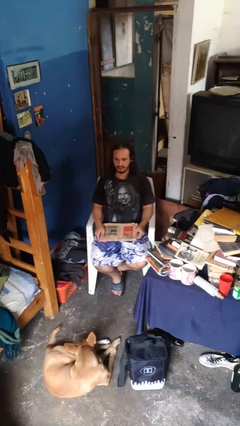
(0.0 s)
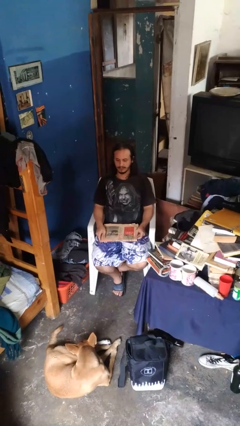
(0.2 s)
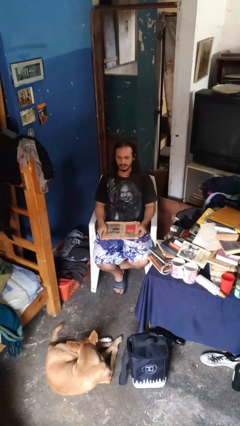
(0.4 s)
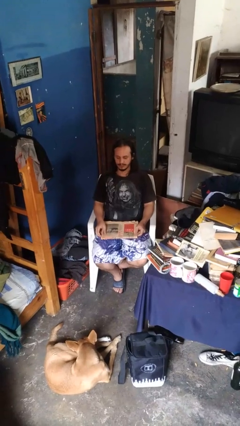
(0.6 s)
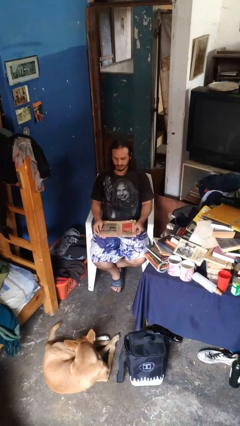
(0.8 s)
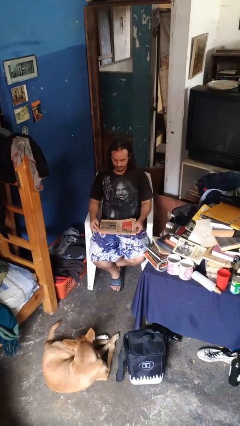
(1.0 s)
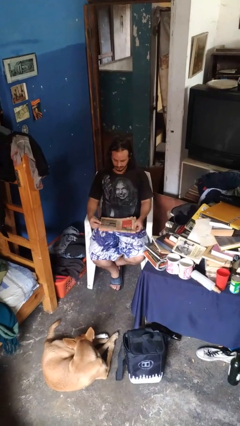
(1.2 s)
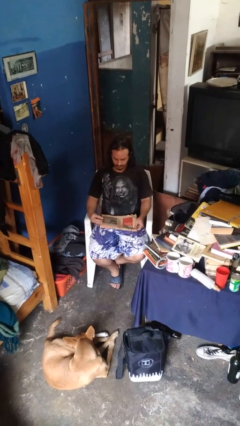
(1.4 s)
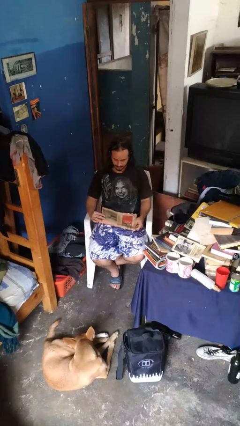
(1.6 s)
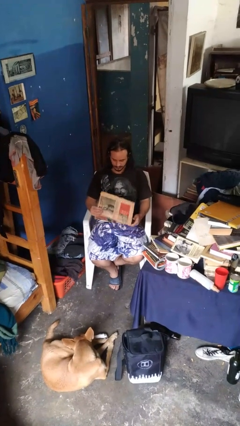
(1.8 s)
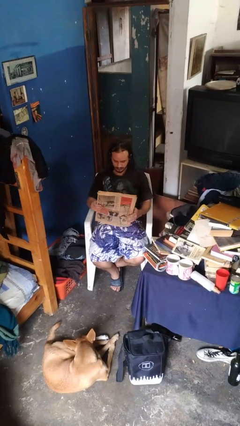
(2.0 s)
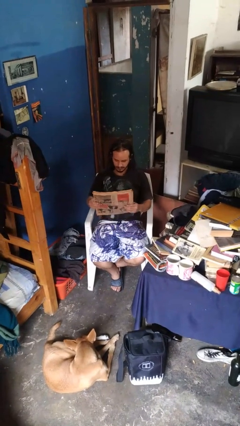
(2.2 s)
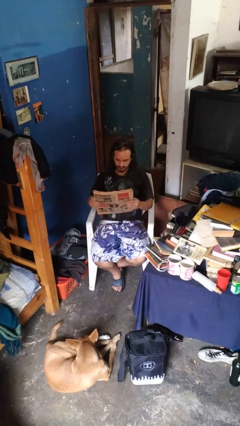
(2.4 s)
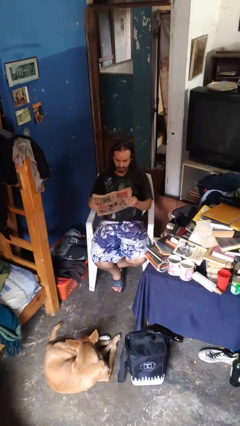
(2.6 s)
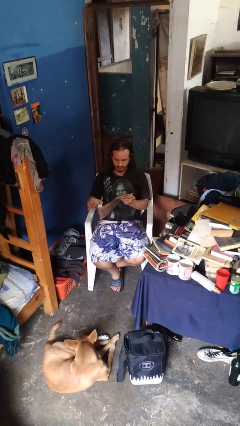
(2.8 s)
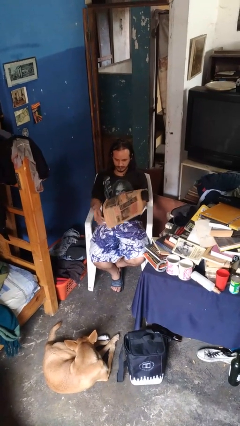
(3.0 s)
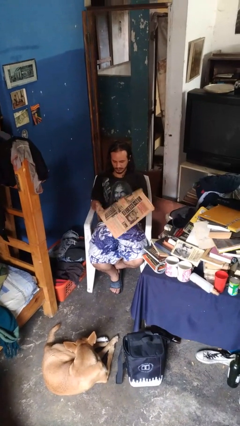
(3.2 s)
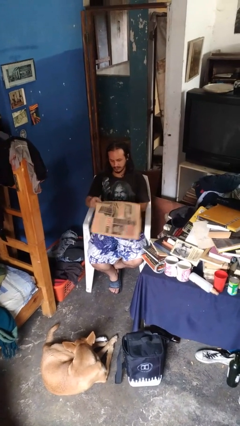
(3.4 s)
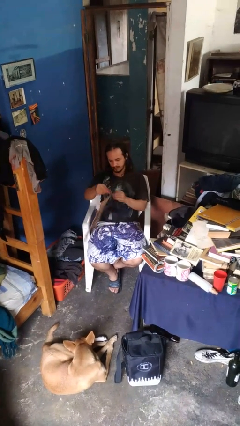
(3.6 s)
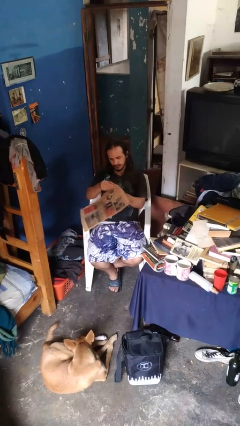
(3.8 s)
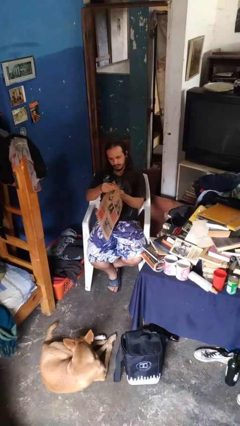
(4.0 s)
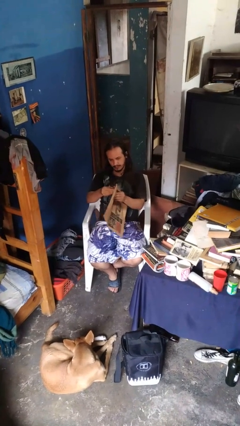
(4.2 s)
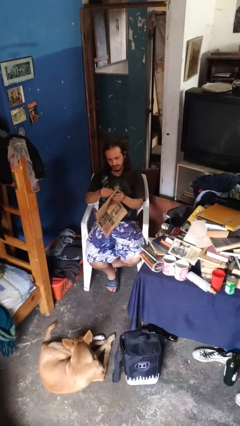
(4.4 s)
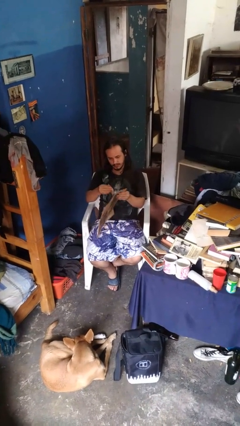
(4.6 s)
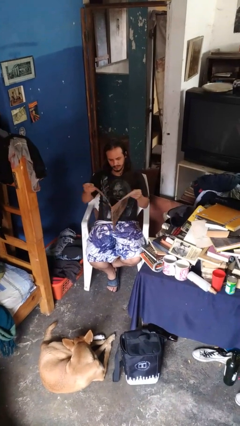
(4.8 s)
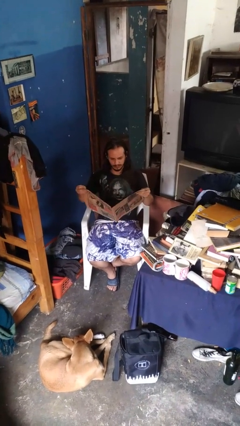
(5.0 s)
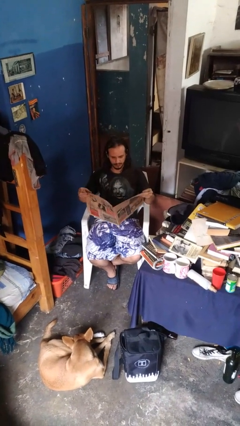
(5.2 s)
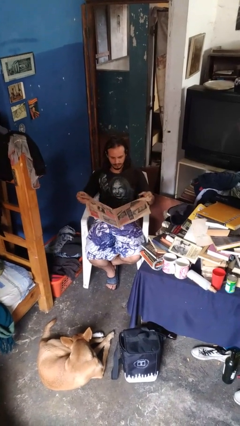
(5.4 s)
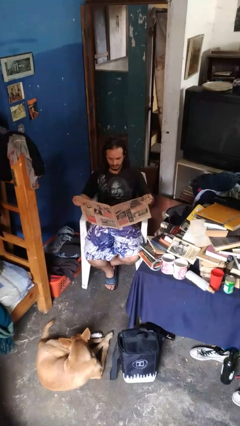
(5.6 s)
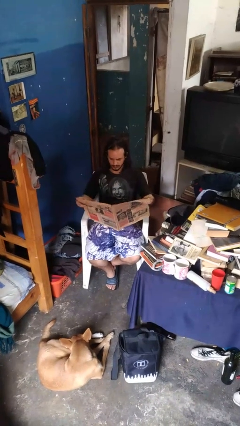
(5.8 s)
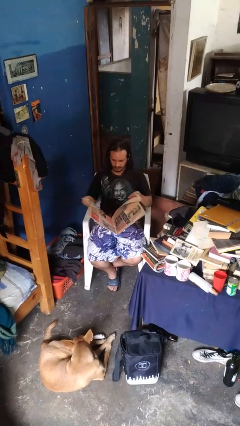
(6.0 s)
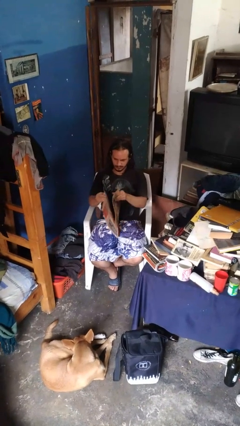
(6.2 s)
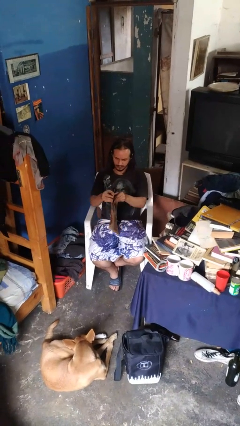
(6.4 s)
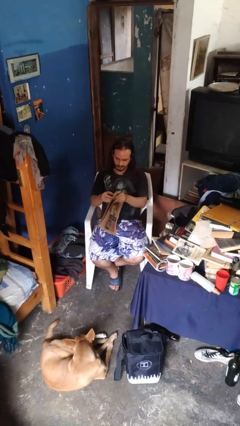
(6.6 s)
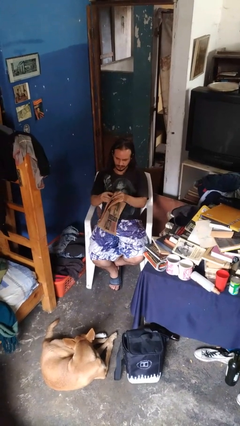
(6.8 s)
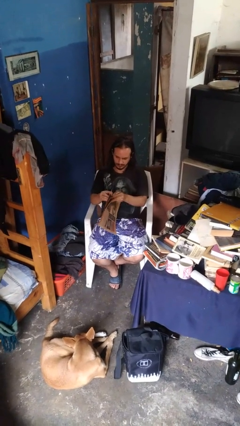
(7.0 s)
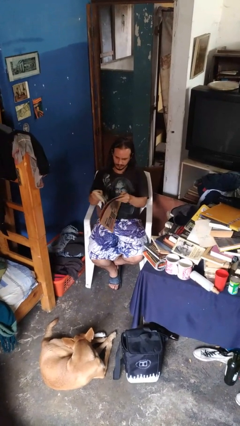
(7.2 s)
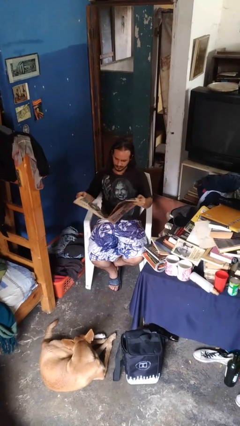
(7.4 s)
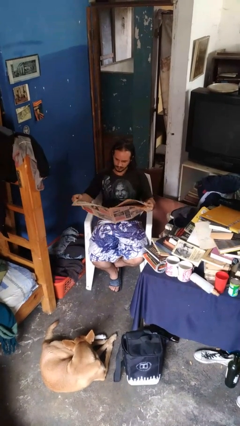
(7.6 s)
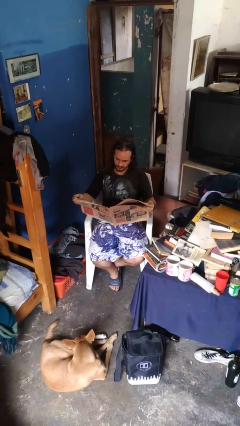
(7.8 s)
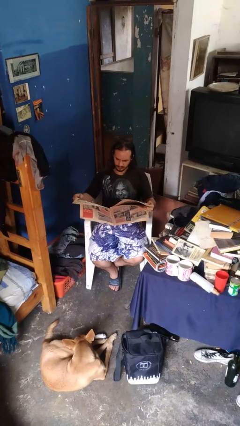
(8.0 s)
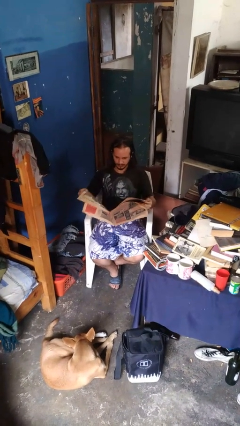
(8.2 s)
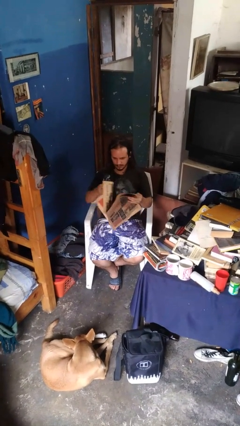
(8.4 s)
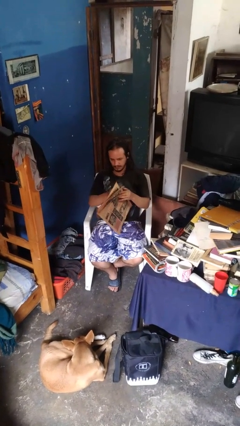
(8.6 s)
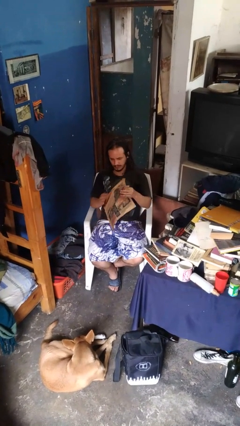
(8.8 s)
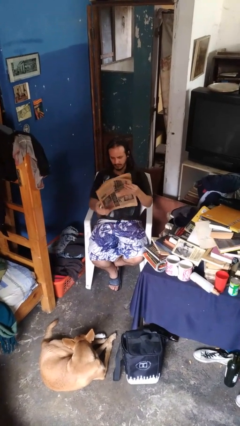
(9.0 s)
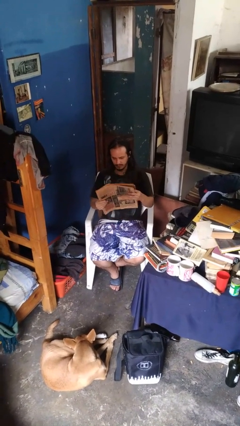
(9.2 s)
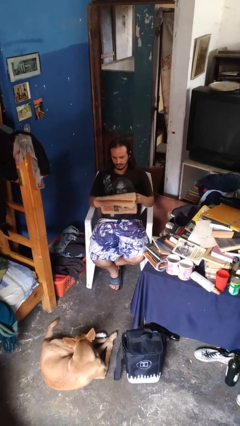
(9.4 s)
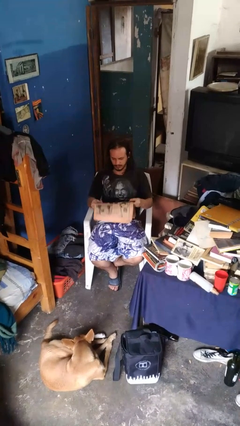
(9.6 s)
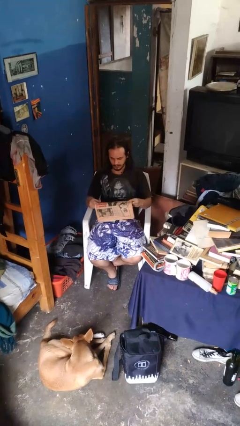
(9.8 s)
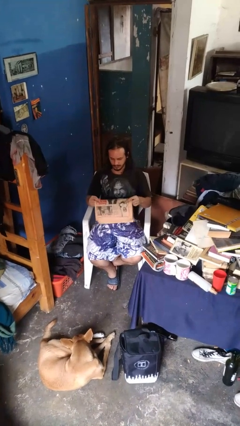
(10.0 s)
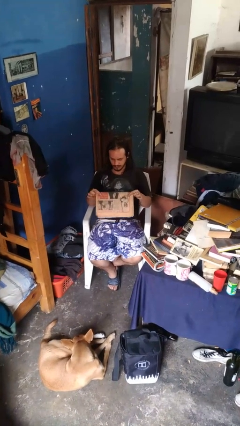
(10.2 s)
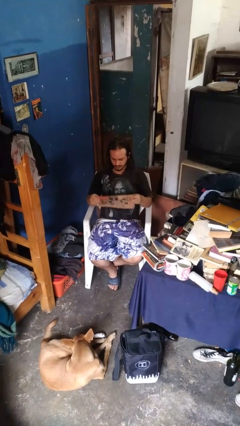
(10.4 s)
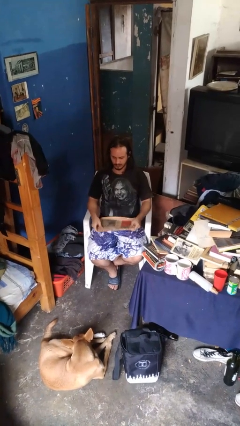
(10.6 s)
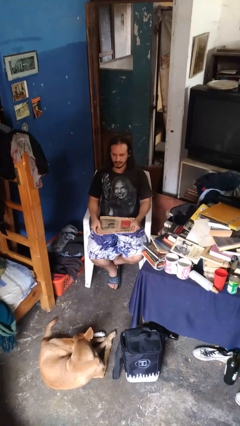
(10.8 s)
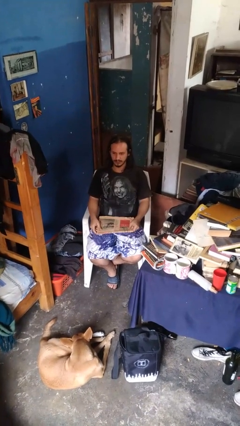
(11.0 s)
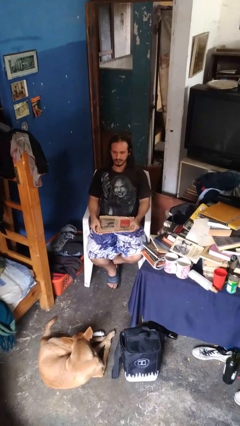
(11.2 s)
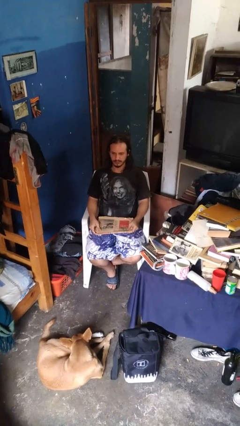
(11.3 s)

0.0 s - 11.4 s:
person reads newspaper

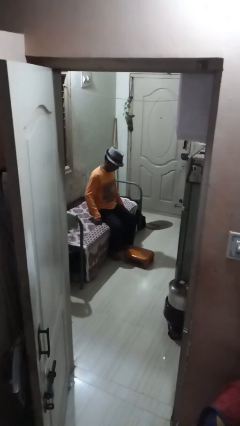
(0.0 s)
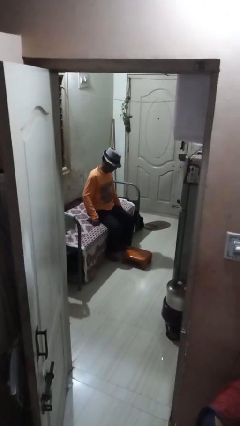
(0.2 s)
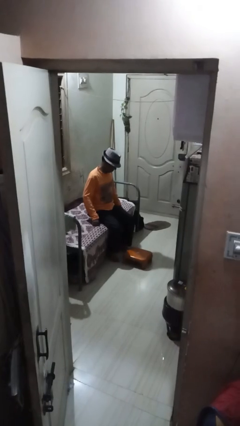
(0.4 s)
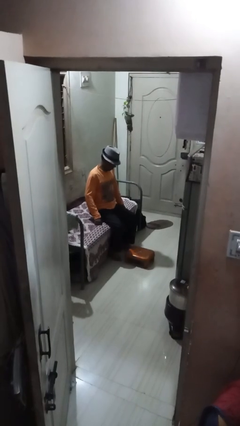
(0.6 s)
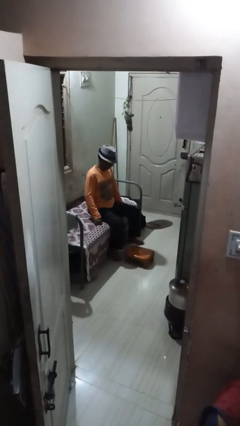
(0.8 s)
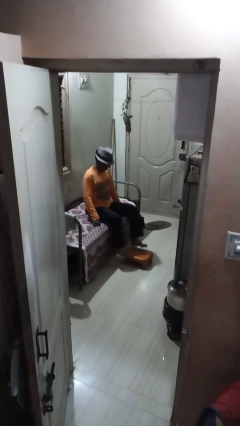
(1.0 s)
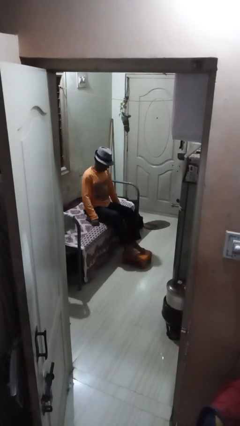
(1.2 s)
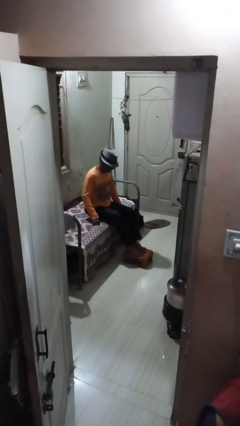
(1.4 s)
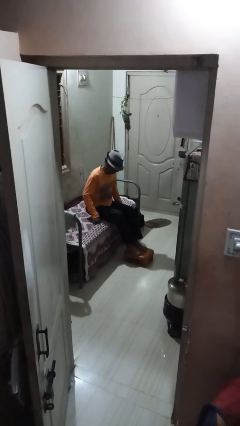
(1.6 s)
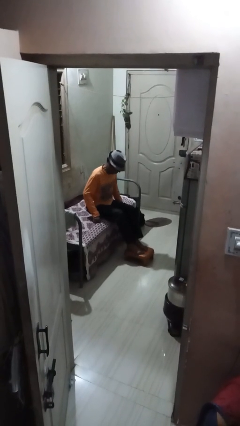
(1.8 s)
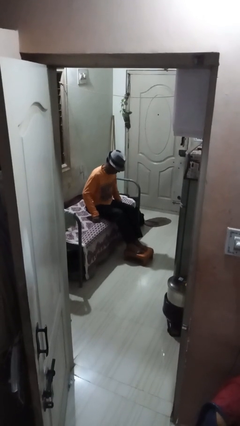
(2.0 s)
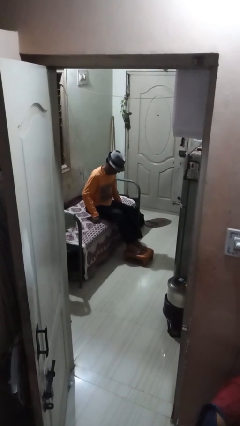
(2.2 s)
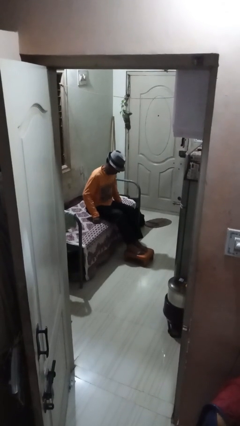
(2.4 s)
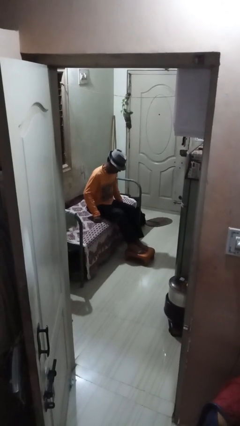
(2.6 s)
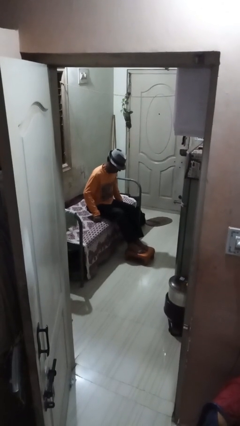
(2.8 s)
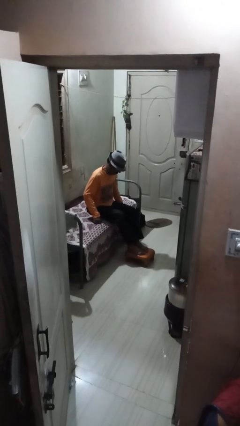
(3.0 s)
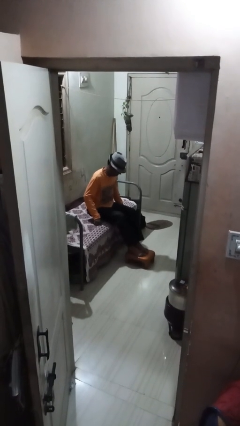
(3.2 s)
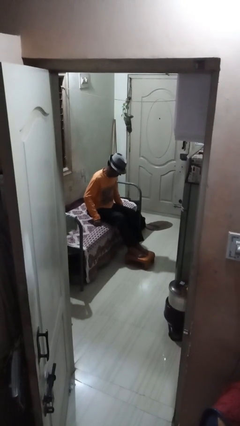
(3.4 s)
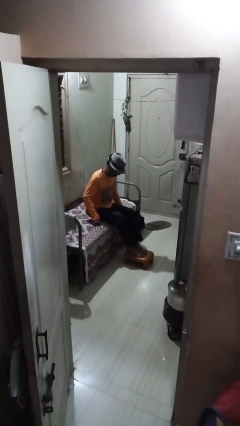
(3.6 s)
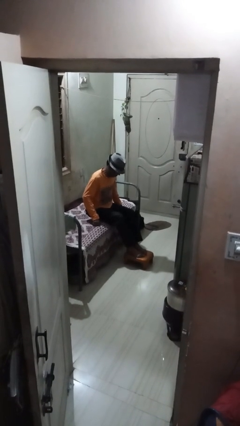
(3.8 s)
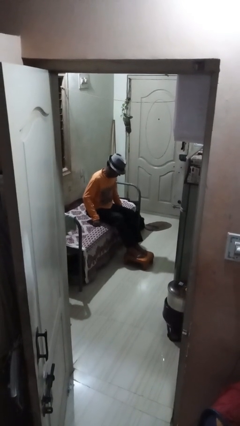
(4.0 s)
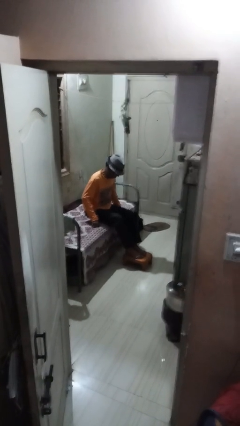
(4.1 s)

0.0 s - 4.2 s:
person puts feet up

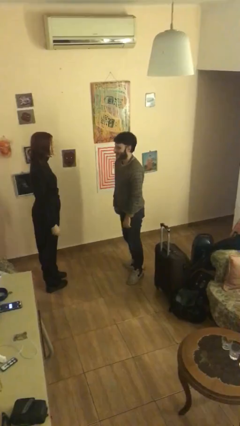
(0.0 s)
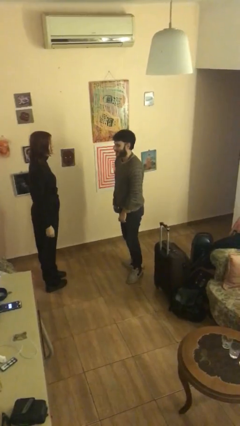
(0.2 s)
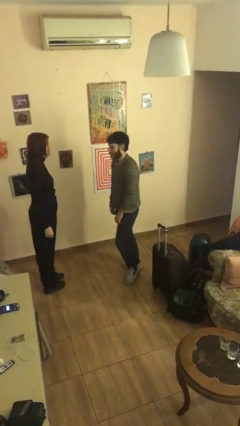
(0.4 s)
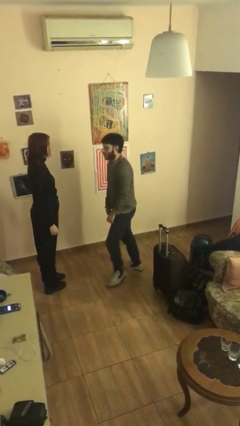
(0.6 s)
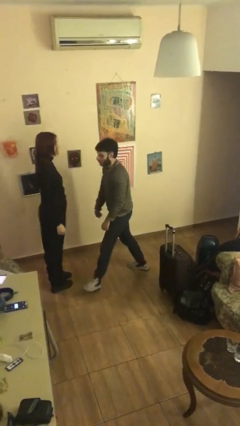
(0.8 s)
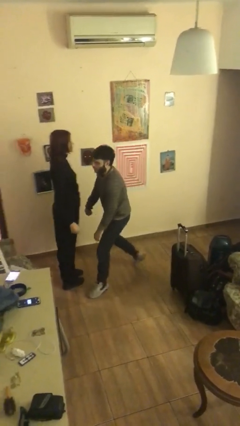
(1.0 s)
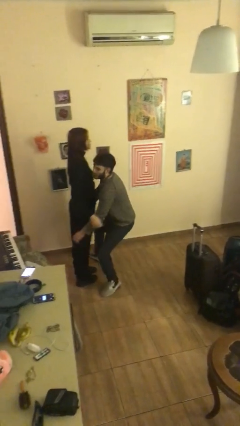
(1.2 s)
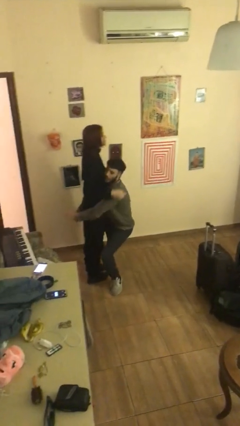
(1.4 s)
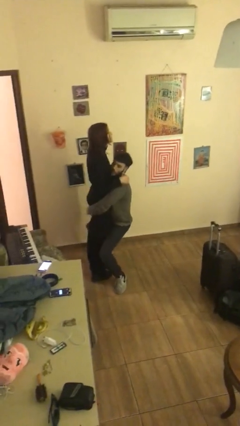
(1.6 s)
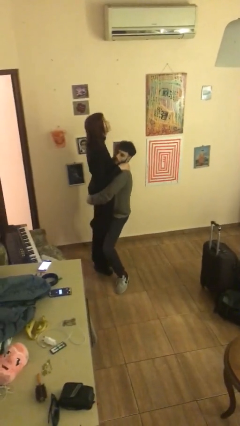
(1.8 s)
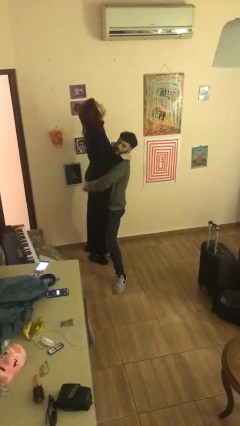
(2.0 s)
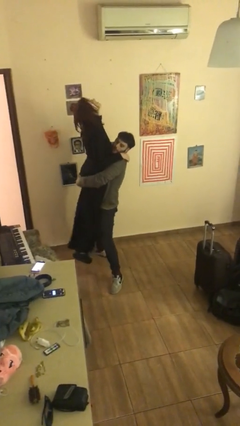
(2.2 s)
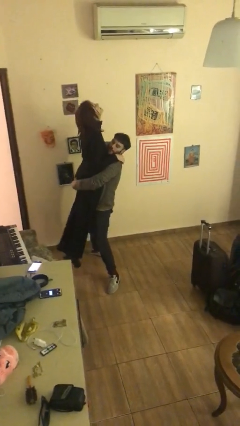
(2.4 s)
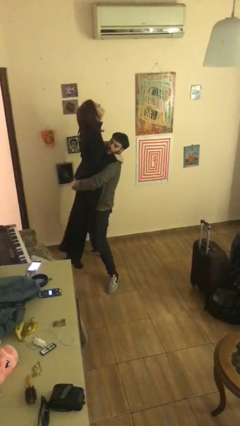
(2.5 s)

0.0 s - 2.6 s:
person picks up person
